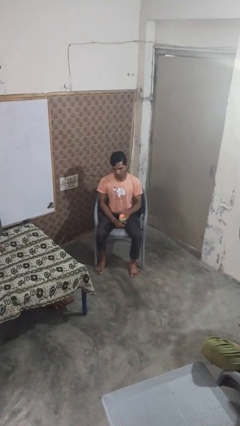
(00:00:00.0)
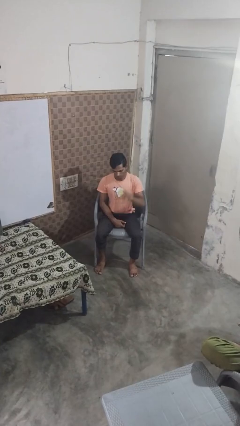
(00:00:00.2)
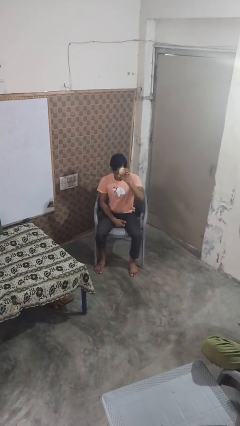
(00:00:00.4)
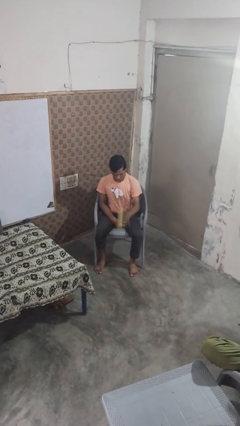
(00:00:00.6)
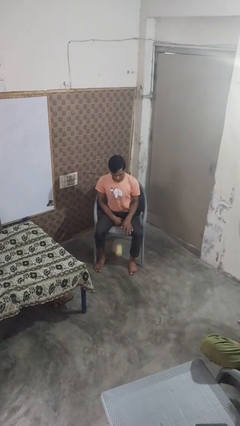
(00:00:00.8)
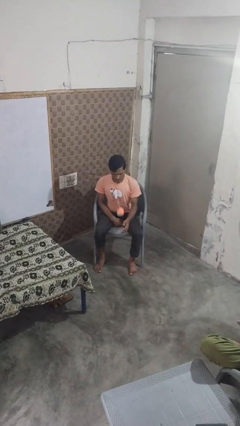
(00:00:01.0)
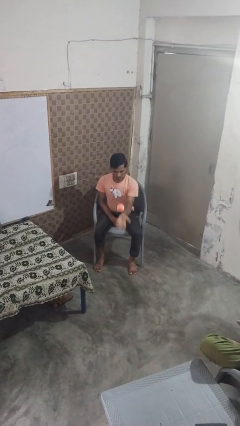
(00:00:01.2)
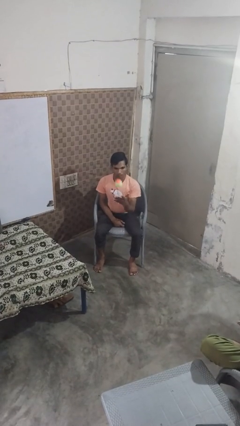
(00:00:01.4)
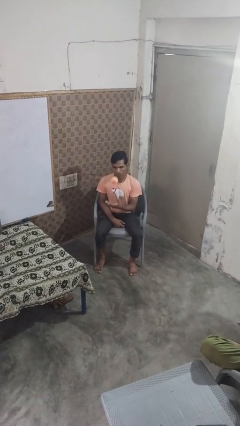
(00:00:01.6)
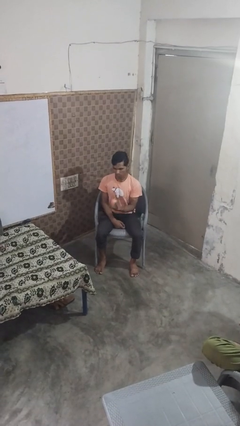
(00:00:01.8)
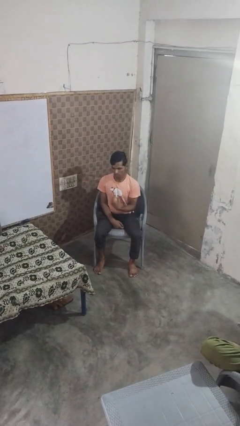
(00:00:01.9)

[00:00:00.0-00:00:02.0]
person bounces ball on floor

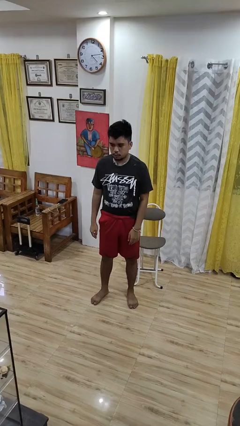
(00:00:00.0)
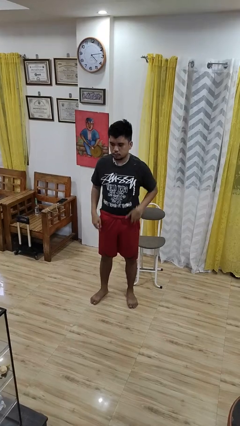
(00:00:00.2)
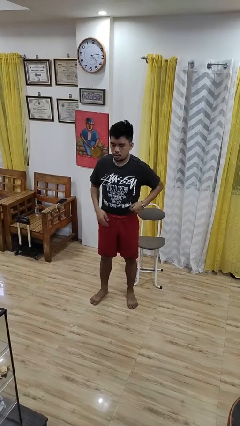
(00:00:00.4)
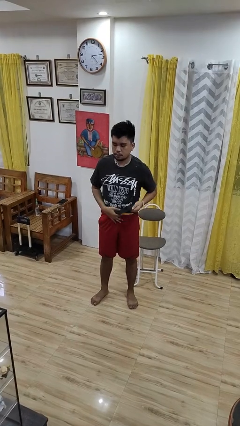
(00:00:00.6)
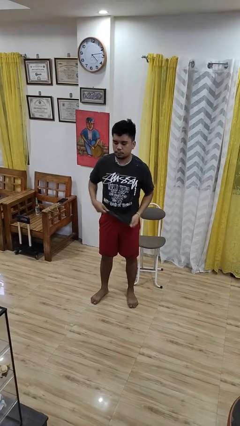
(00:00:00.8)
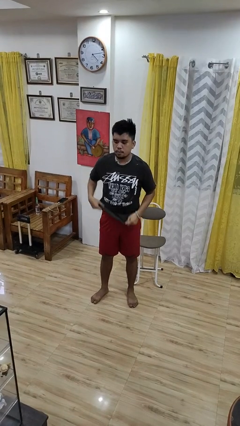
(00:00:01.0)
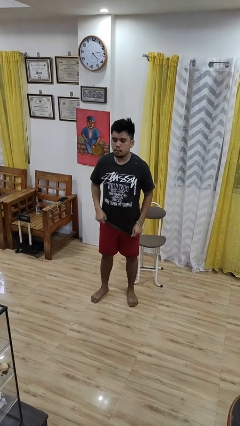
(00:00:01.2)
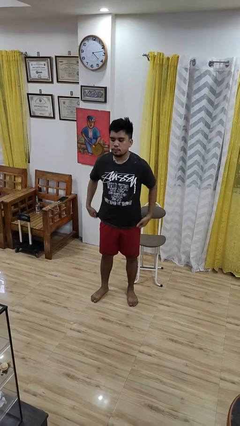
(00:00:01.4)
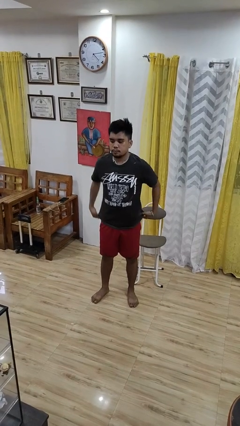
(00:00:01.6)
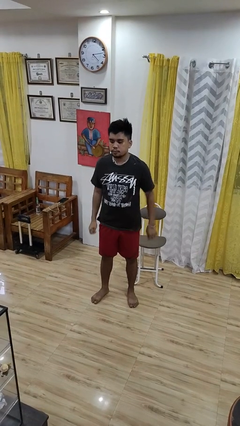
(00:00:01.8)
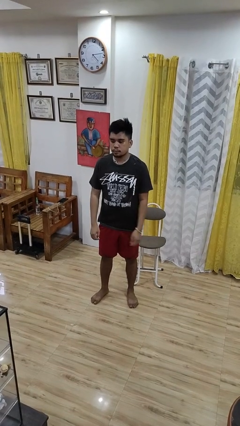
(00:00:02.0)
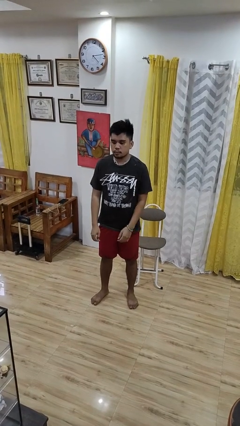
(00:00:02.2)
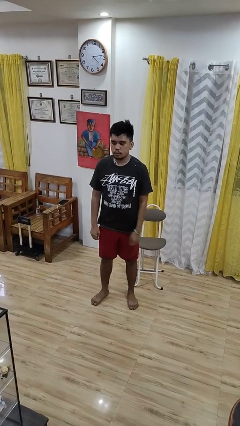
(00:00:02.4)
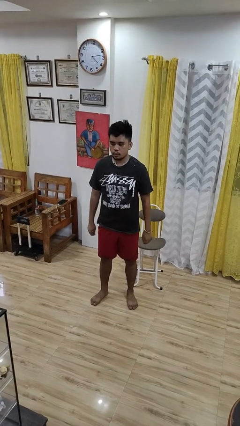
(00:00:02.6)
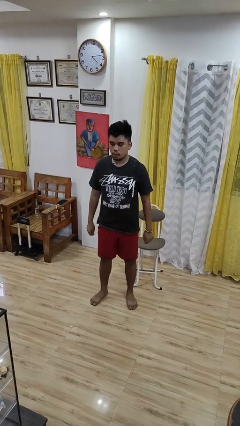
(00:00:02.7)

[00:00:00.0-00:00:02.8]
person untucks shirt

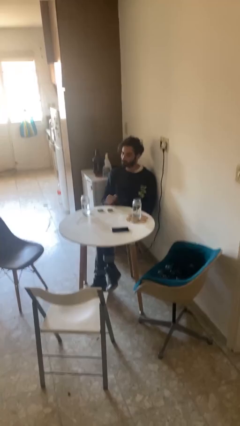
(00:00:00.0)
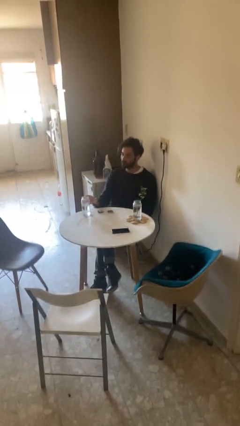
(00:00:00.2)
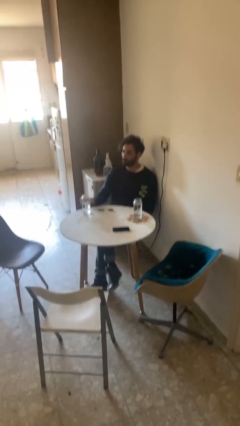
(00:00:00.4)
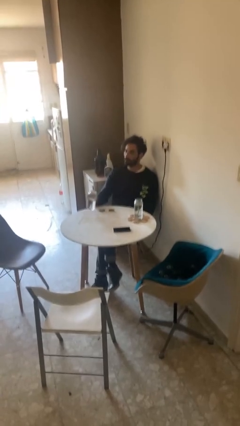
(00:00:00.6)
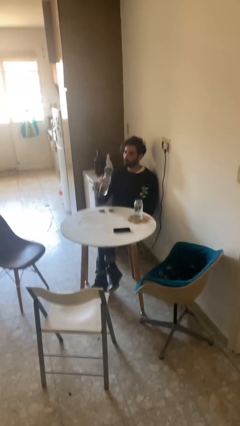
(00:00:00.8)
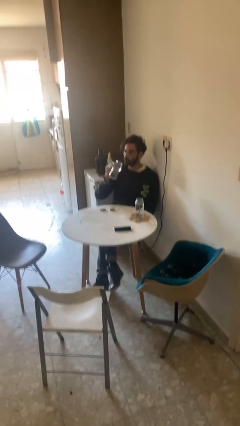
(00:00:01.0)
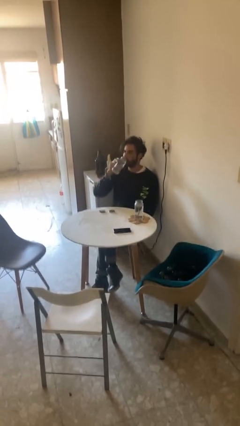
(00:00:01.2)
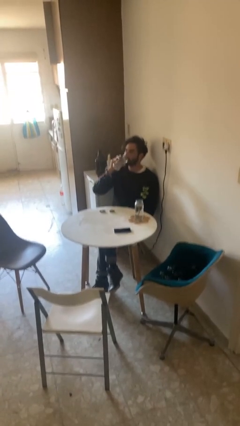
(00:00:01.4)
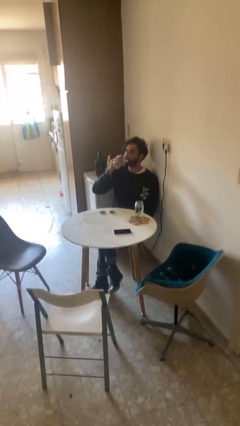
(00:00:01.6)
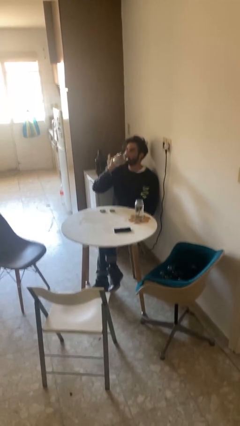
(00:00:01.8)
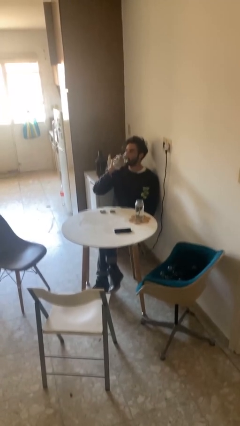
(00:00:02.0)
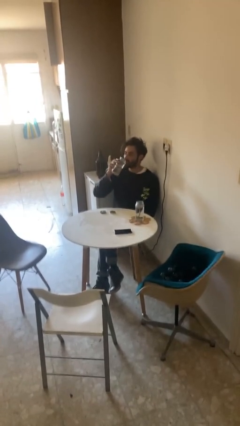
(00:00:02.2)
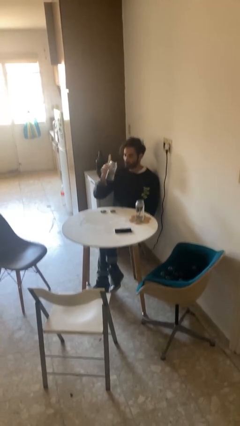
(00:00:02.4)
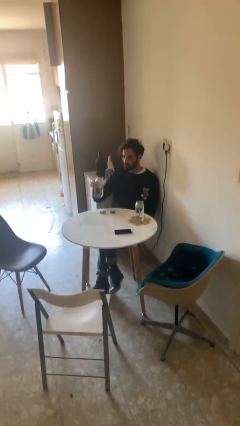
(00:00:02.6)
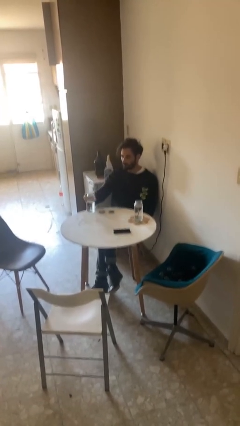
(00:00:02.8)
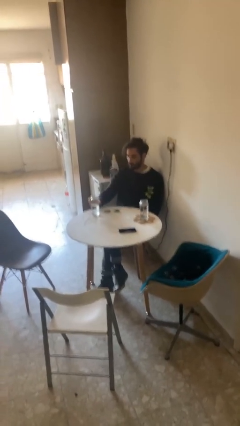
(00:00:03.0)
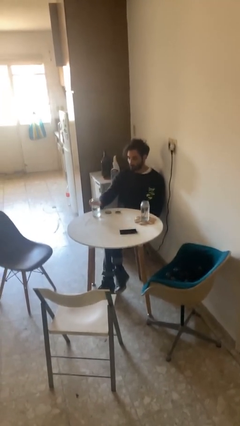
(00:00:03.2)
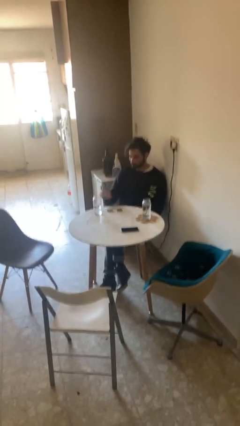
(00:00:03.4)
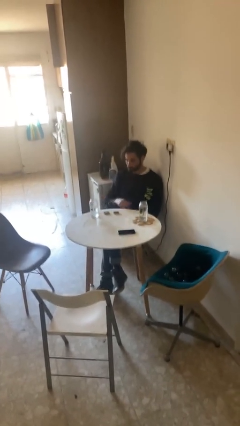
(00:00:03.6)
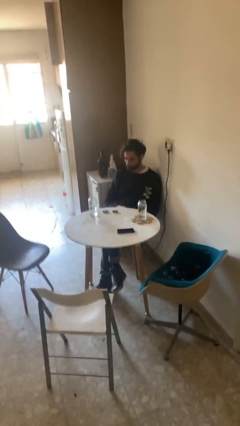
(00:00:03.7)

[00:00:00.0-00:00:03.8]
person drinks from cup

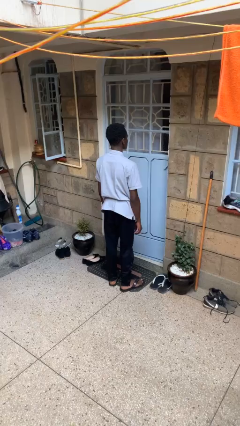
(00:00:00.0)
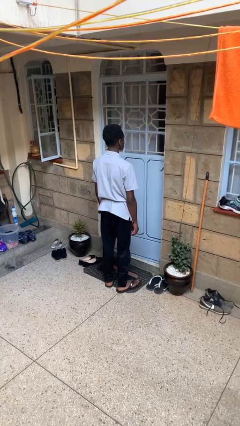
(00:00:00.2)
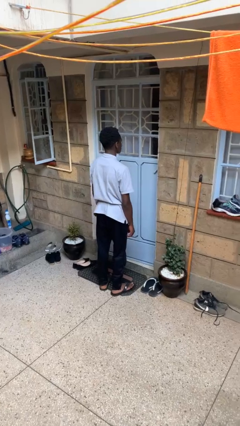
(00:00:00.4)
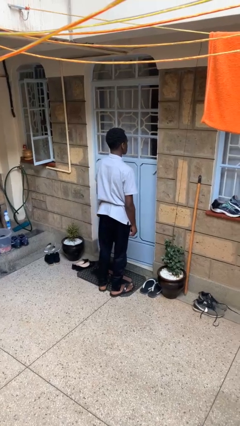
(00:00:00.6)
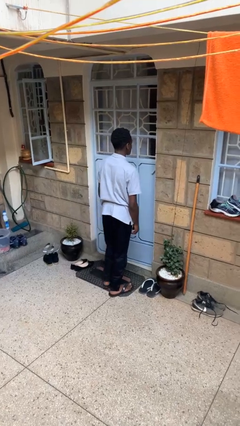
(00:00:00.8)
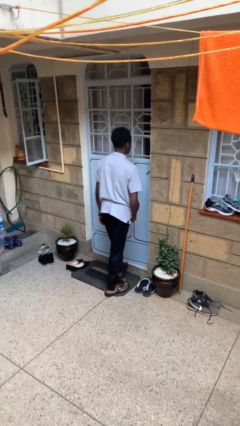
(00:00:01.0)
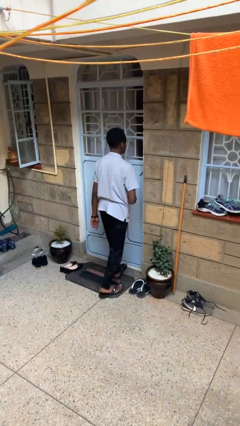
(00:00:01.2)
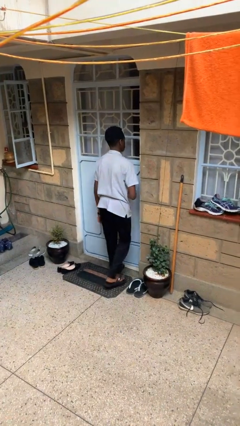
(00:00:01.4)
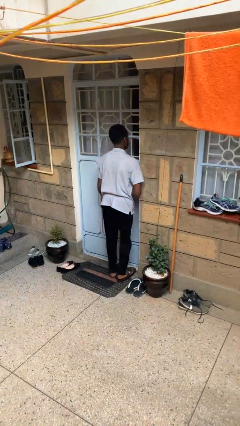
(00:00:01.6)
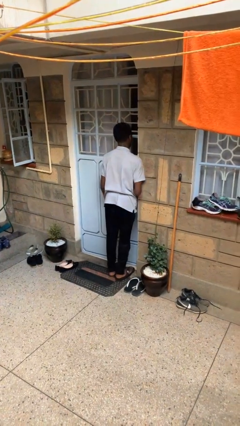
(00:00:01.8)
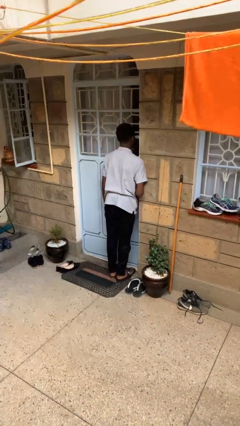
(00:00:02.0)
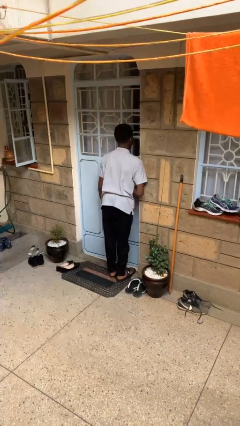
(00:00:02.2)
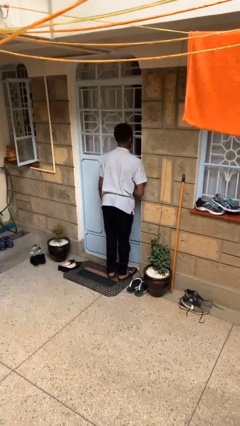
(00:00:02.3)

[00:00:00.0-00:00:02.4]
person bumps into wall

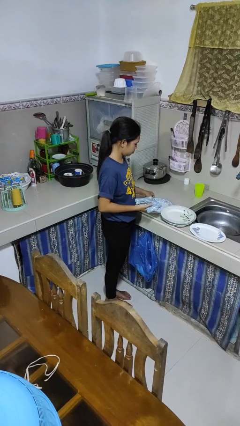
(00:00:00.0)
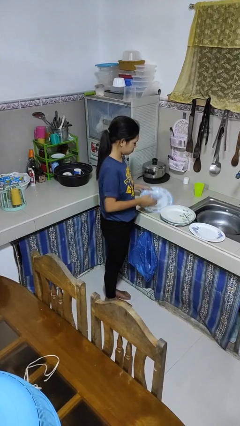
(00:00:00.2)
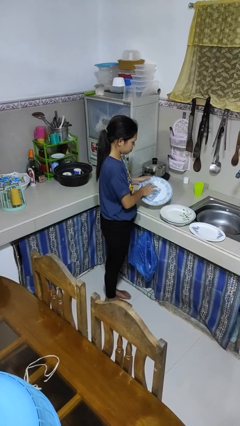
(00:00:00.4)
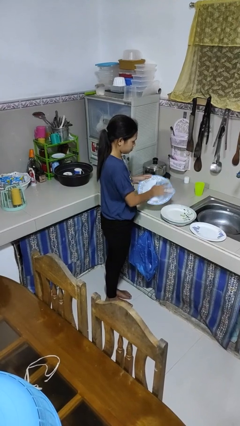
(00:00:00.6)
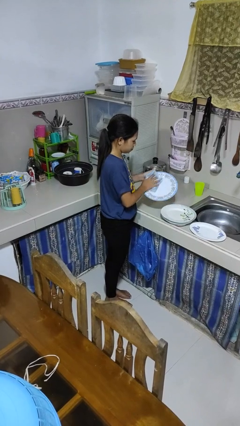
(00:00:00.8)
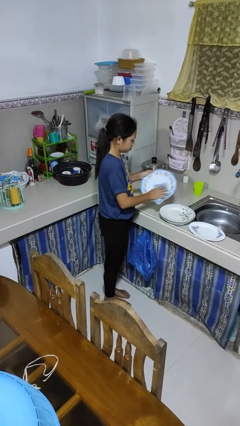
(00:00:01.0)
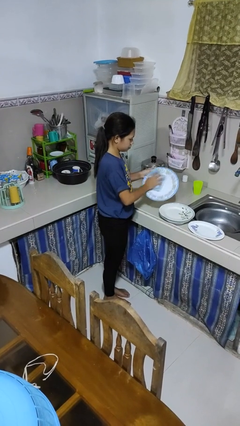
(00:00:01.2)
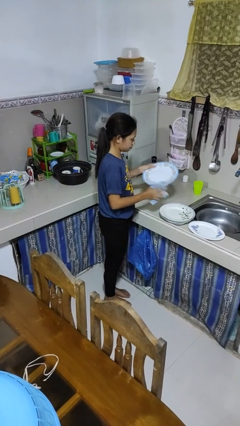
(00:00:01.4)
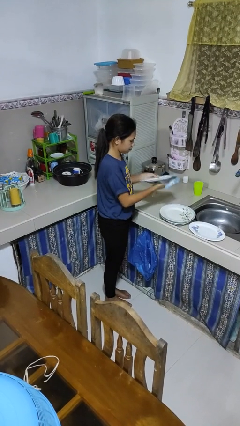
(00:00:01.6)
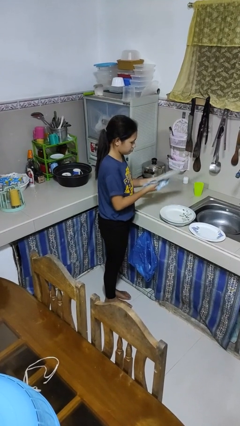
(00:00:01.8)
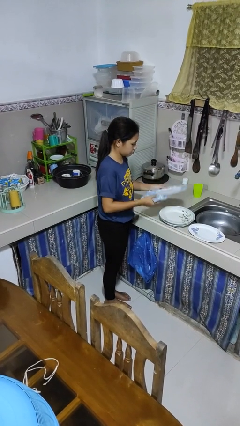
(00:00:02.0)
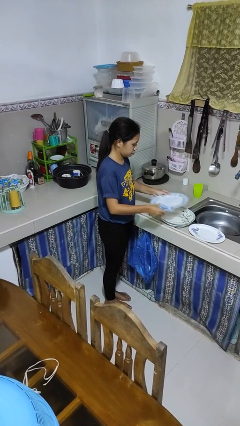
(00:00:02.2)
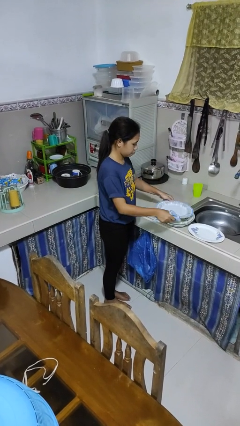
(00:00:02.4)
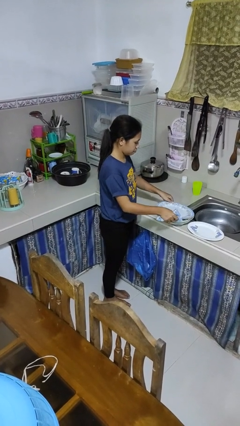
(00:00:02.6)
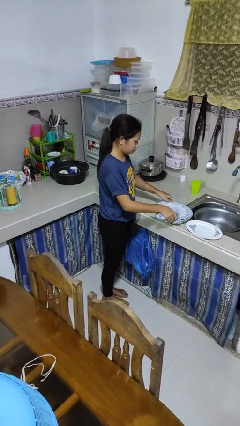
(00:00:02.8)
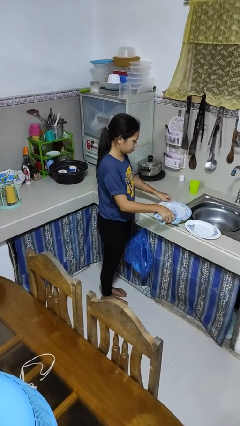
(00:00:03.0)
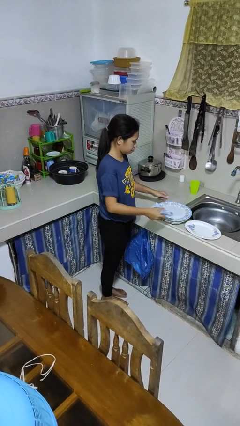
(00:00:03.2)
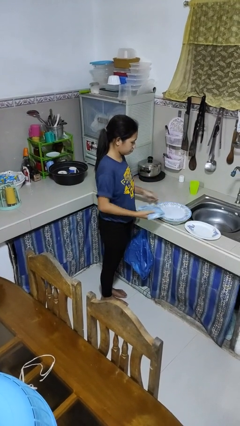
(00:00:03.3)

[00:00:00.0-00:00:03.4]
person dries dish

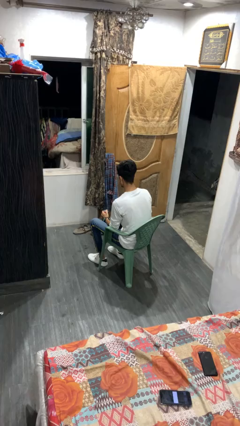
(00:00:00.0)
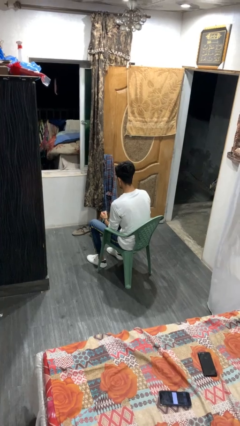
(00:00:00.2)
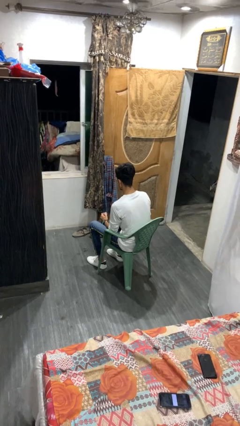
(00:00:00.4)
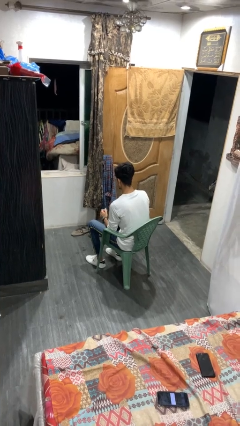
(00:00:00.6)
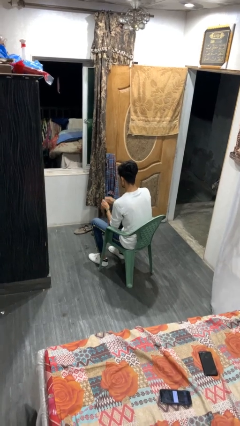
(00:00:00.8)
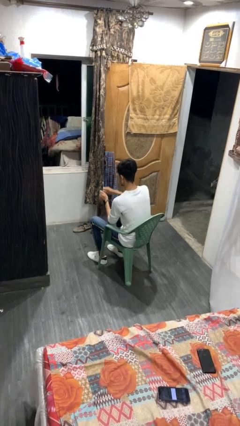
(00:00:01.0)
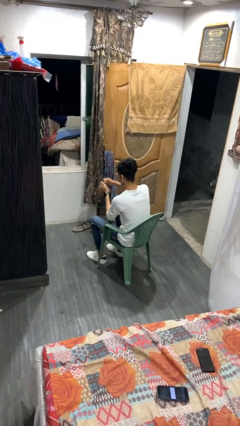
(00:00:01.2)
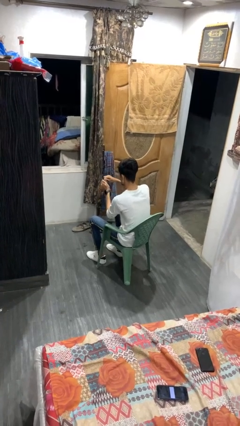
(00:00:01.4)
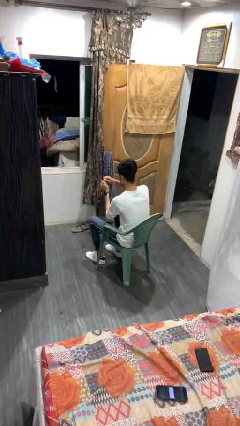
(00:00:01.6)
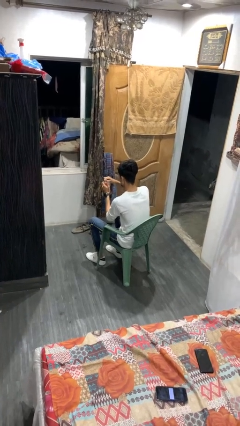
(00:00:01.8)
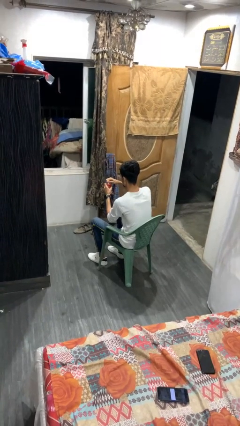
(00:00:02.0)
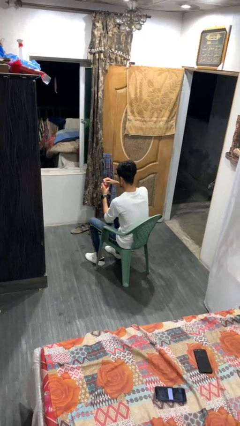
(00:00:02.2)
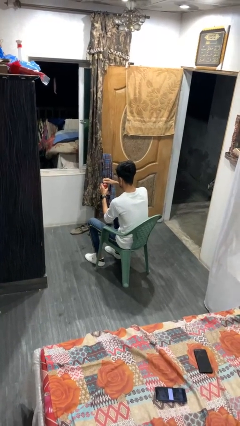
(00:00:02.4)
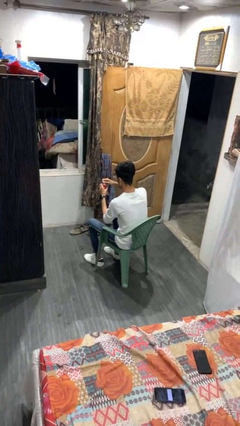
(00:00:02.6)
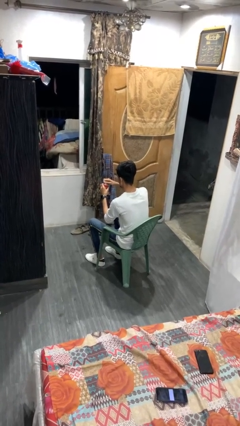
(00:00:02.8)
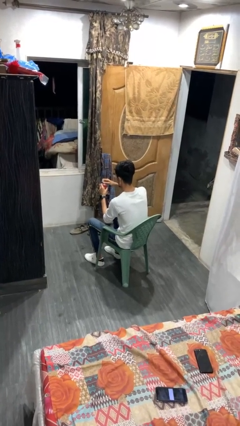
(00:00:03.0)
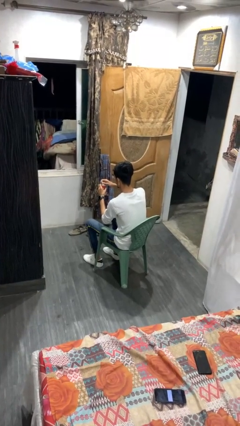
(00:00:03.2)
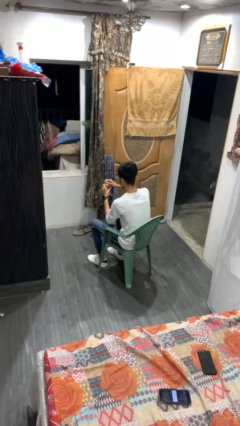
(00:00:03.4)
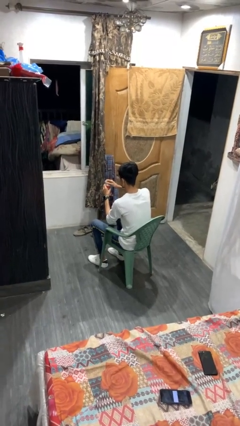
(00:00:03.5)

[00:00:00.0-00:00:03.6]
person opens beverage can
